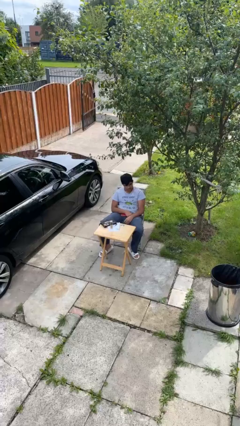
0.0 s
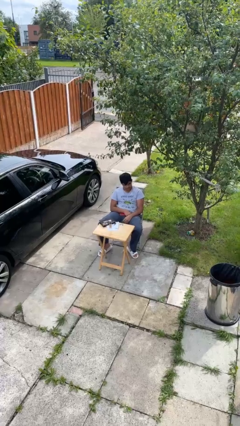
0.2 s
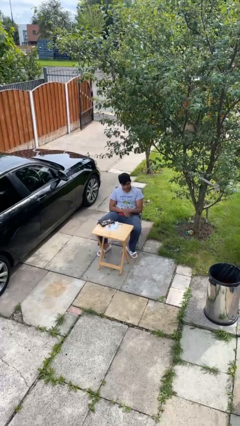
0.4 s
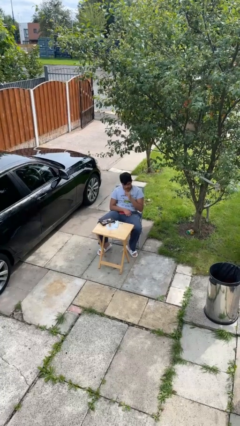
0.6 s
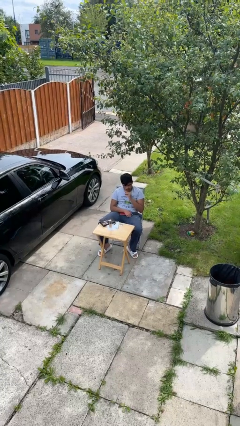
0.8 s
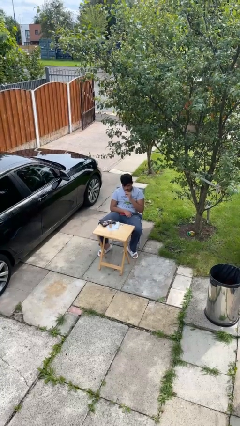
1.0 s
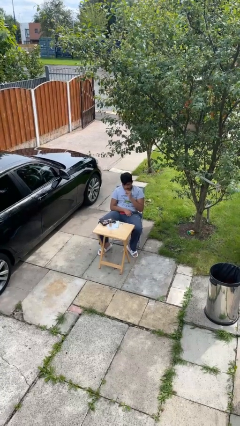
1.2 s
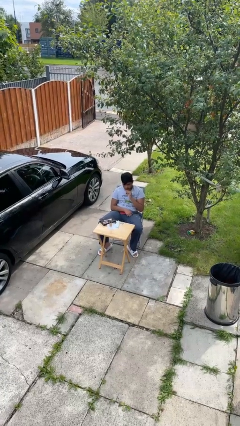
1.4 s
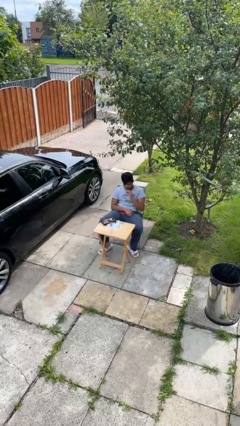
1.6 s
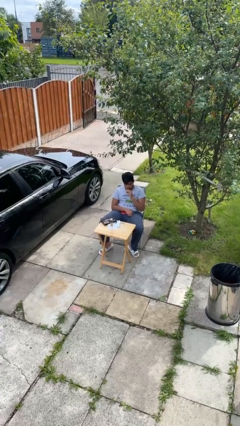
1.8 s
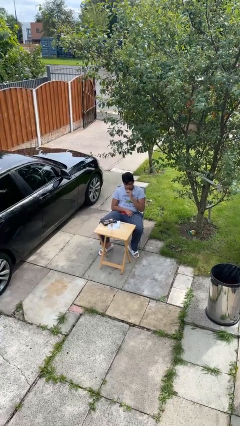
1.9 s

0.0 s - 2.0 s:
person applies lip makeup

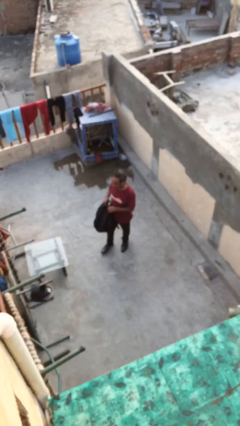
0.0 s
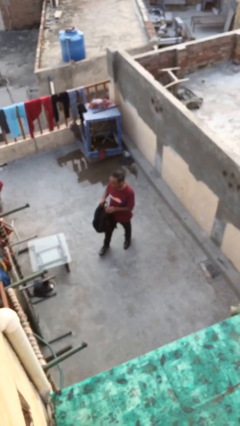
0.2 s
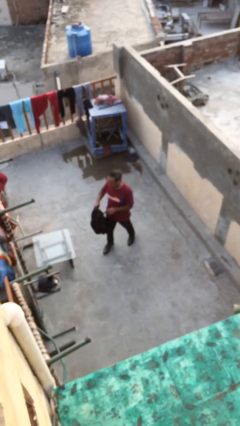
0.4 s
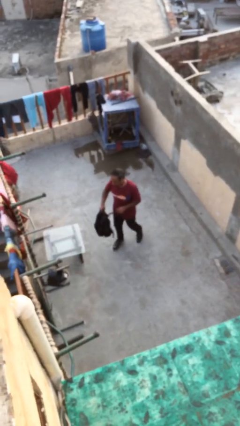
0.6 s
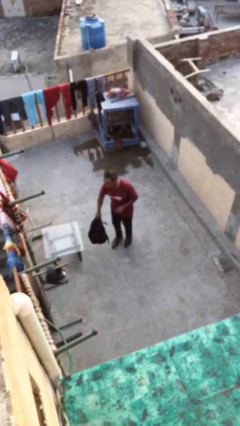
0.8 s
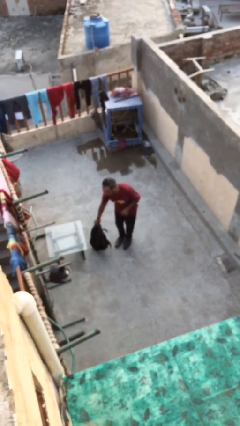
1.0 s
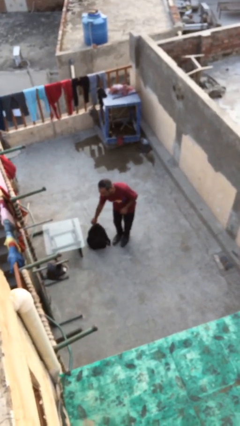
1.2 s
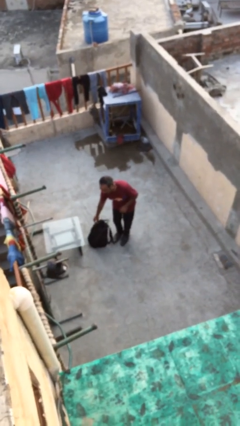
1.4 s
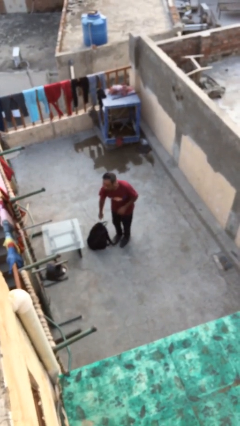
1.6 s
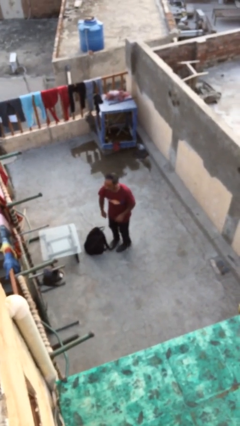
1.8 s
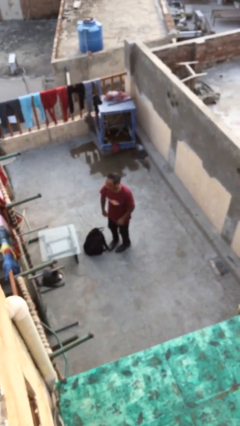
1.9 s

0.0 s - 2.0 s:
person puts down object on floor

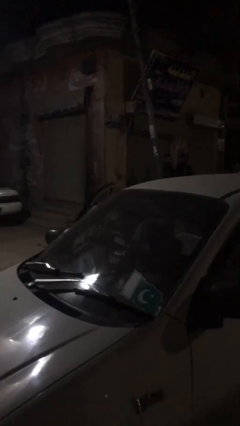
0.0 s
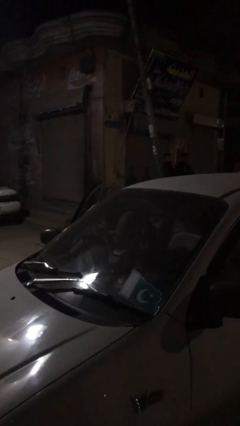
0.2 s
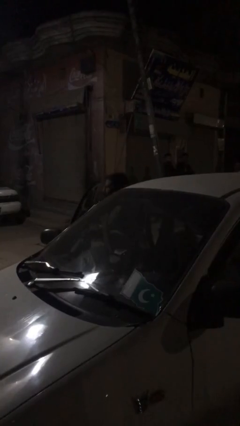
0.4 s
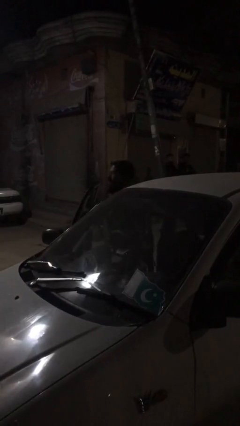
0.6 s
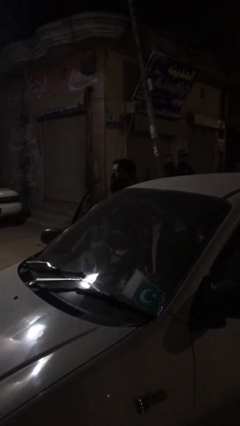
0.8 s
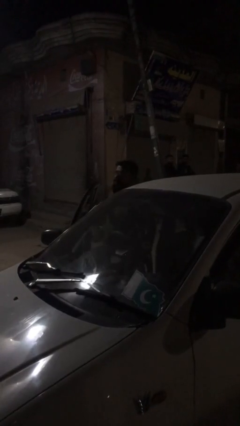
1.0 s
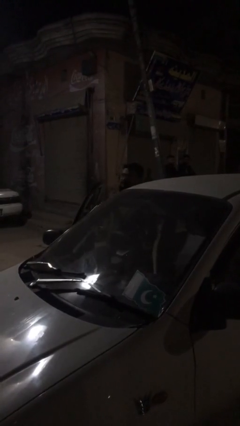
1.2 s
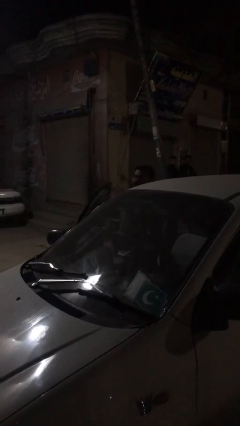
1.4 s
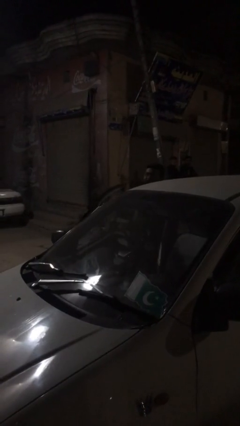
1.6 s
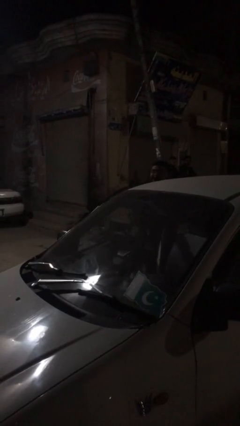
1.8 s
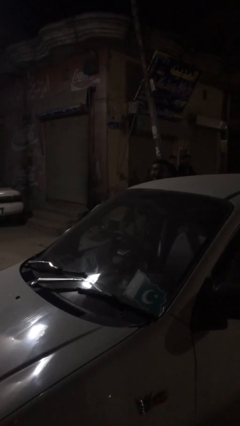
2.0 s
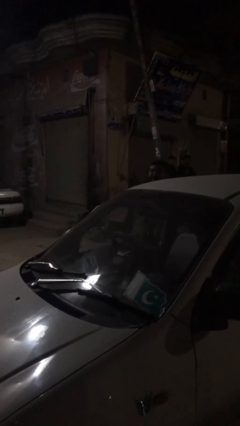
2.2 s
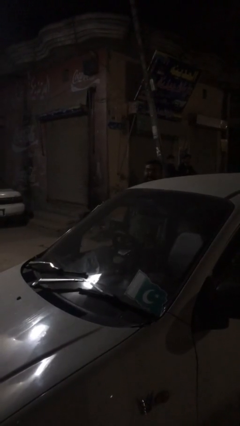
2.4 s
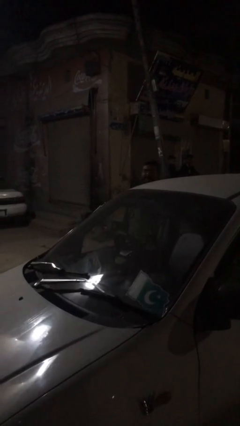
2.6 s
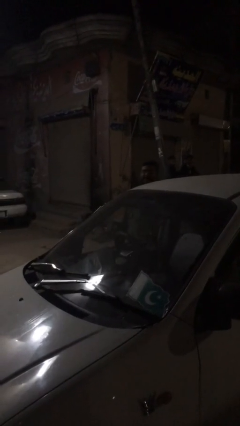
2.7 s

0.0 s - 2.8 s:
person exits car

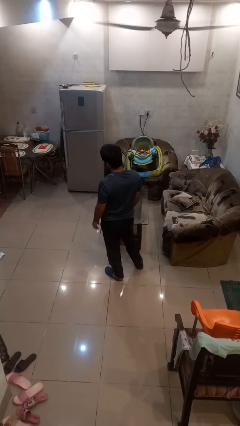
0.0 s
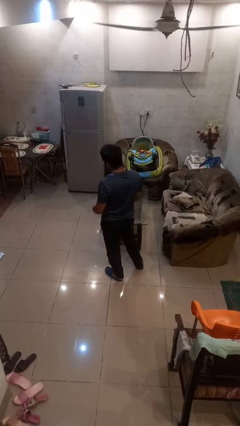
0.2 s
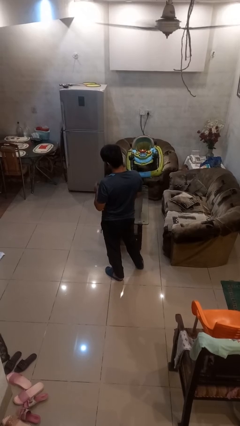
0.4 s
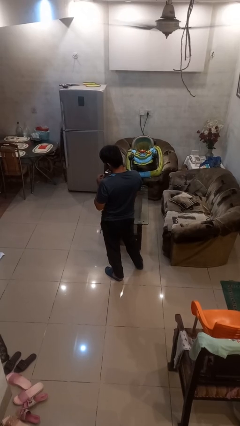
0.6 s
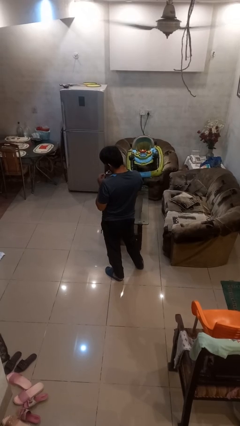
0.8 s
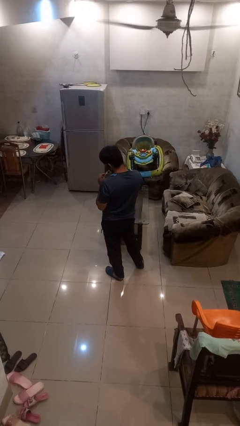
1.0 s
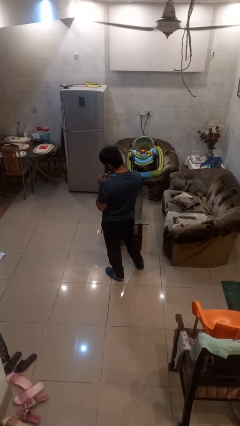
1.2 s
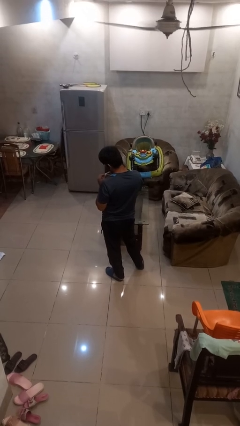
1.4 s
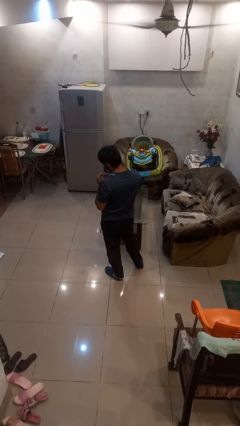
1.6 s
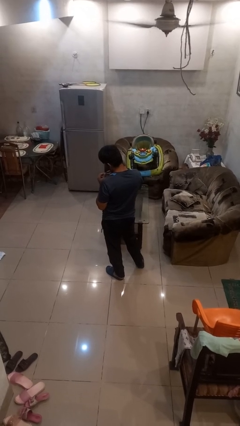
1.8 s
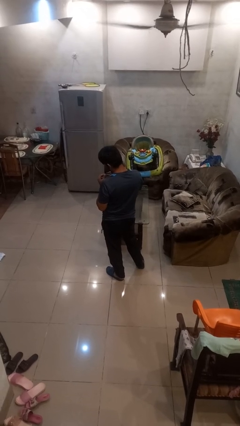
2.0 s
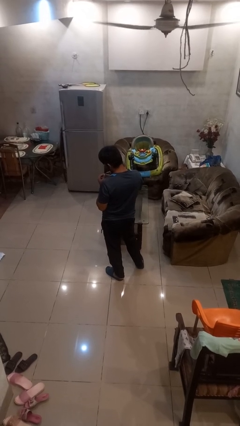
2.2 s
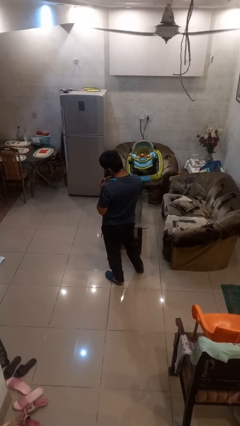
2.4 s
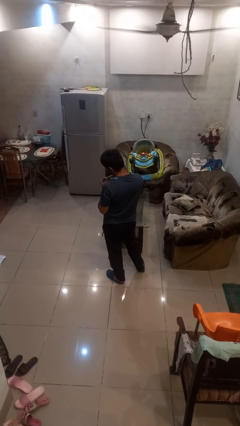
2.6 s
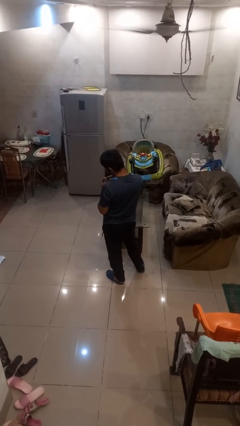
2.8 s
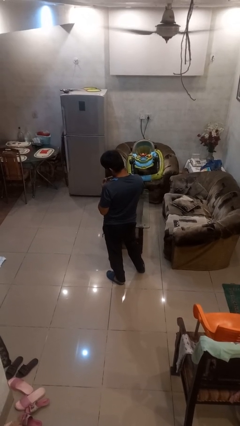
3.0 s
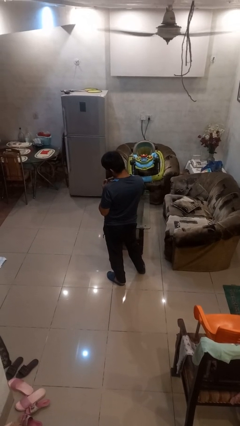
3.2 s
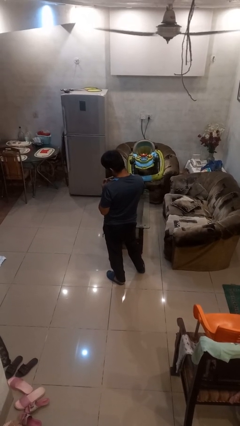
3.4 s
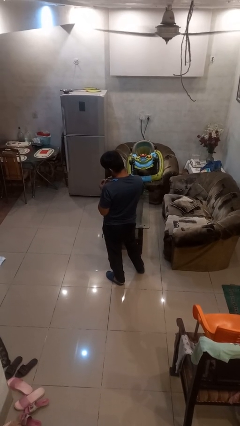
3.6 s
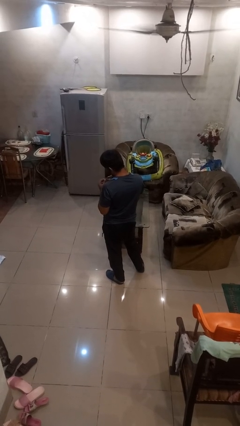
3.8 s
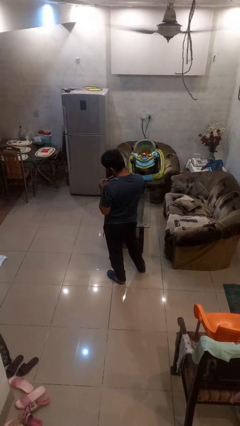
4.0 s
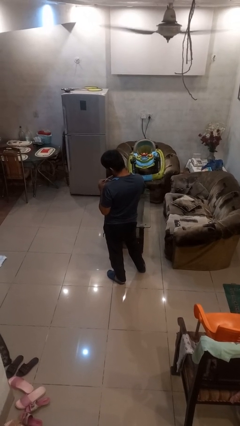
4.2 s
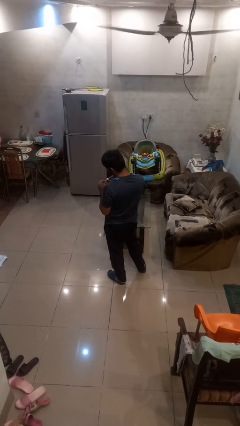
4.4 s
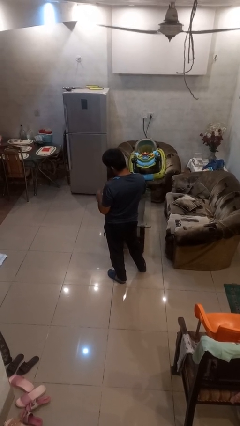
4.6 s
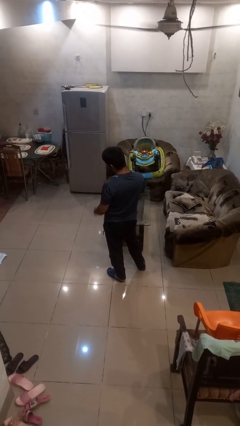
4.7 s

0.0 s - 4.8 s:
person clips fingernails

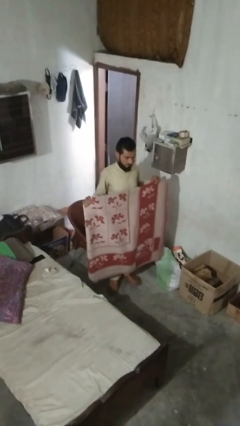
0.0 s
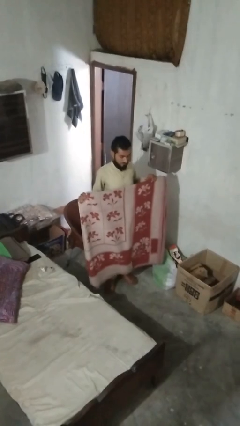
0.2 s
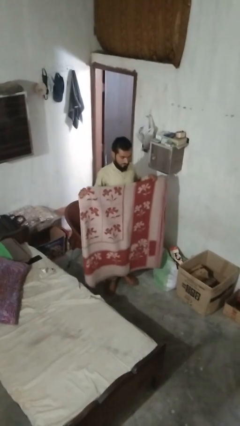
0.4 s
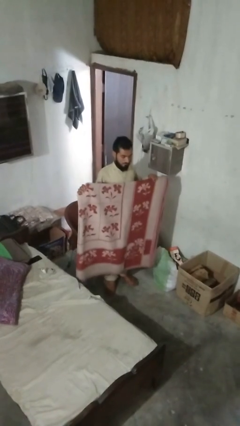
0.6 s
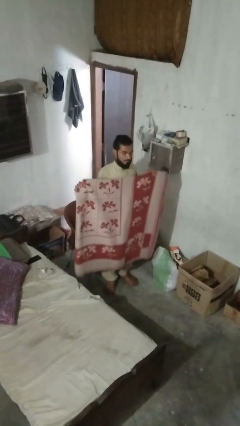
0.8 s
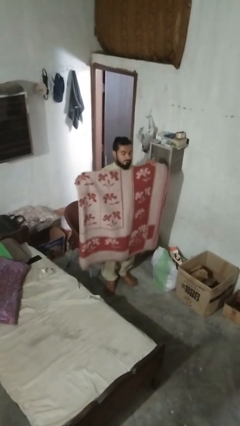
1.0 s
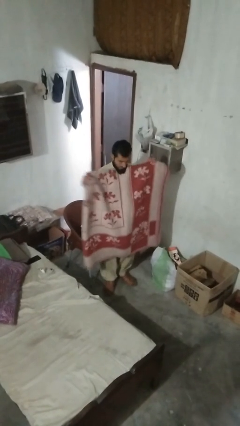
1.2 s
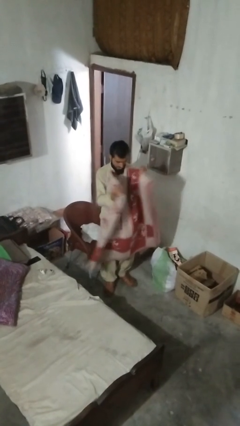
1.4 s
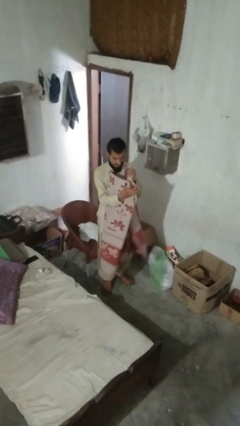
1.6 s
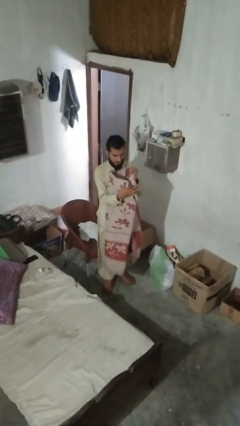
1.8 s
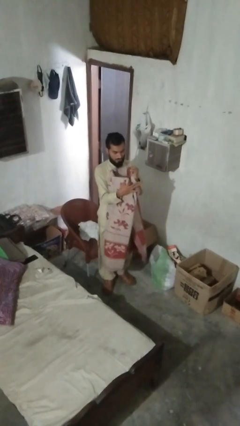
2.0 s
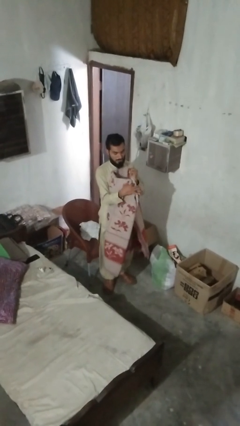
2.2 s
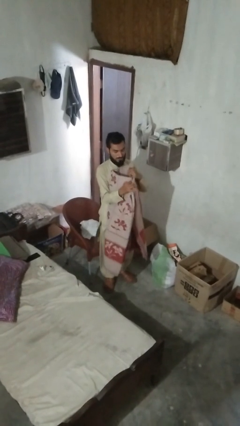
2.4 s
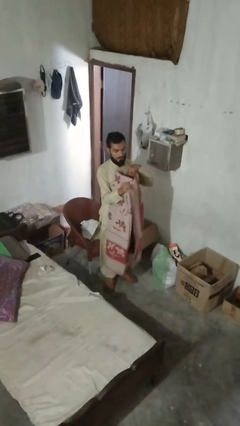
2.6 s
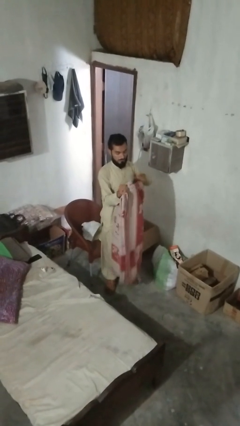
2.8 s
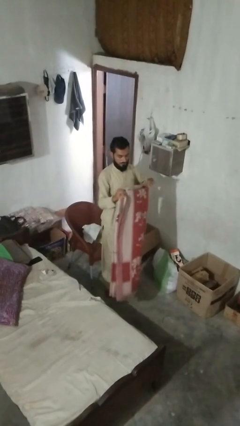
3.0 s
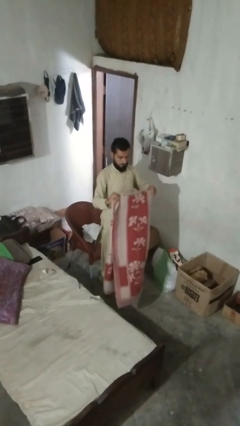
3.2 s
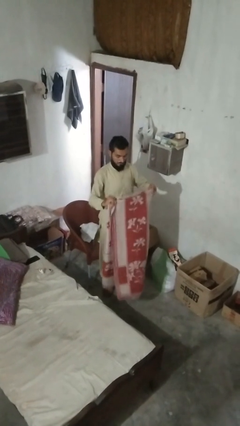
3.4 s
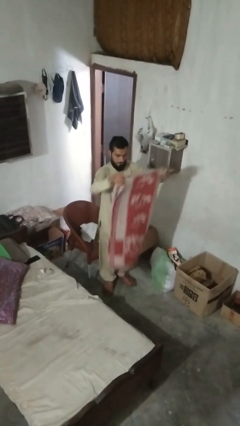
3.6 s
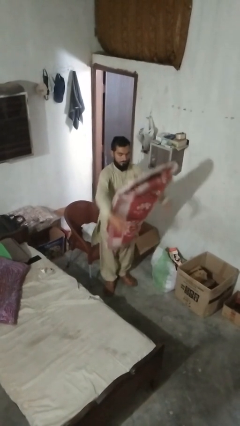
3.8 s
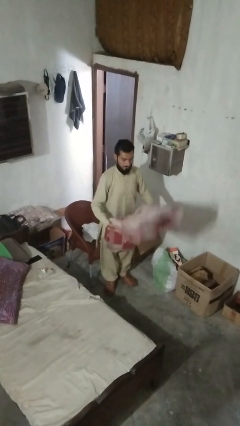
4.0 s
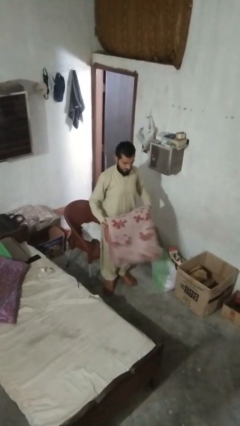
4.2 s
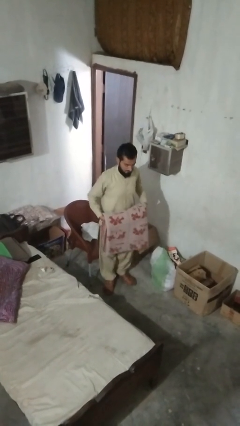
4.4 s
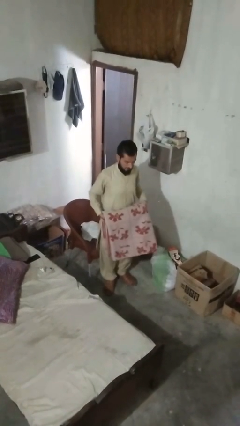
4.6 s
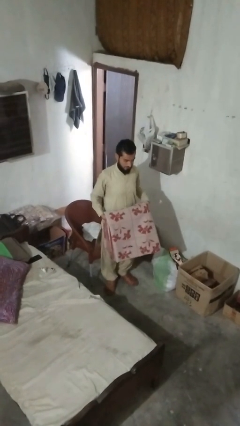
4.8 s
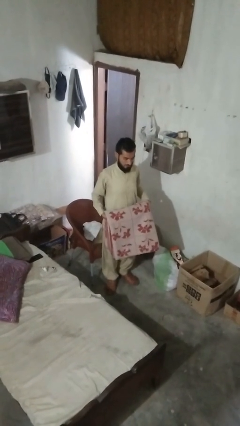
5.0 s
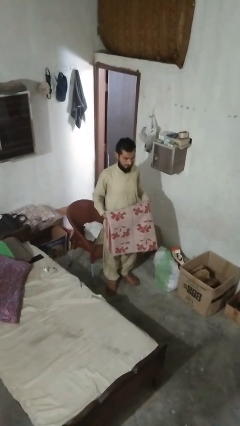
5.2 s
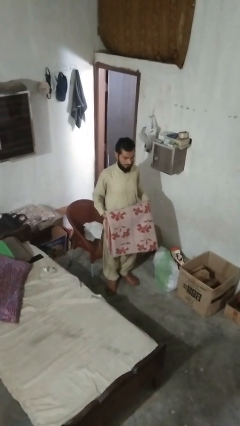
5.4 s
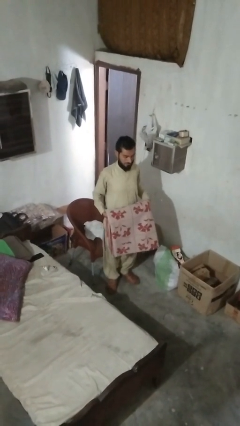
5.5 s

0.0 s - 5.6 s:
person folds blanket

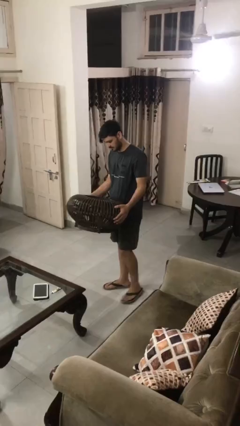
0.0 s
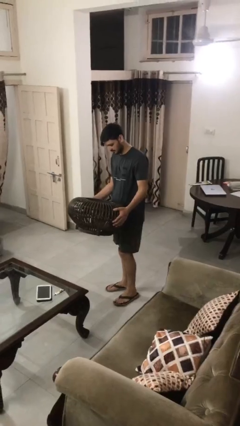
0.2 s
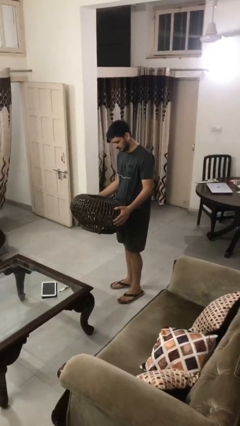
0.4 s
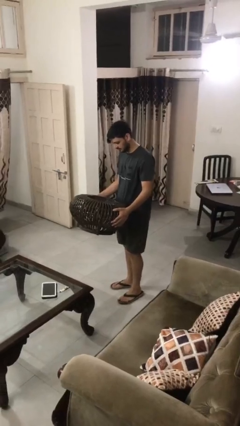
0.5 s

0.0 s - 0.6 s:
person carries furniture
